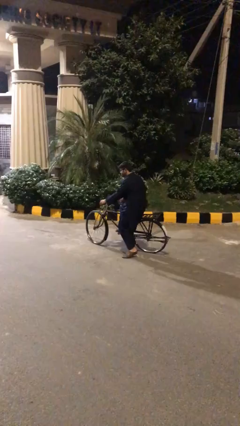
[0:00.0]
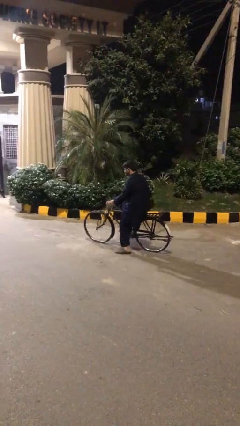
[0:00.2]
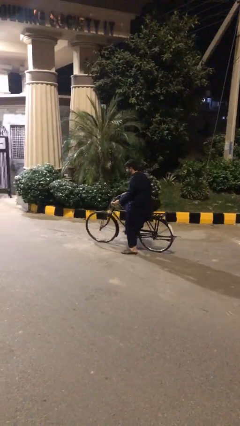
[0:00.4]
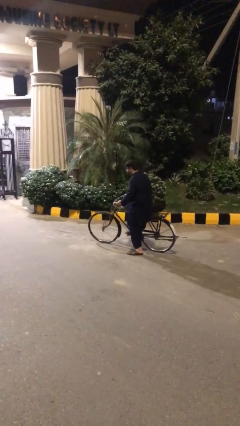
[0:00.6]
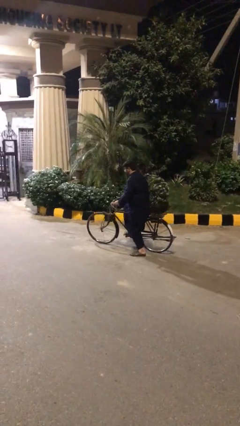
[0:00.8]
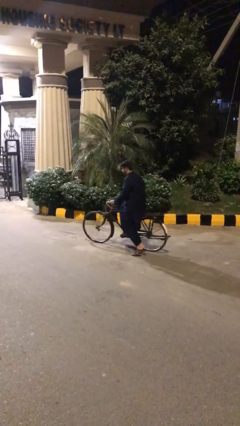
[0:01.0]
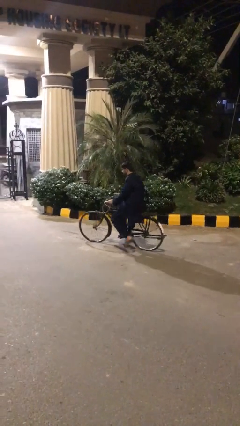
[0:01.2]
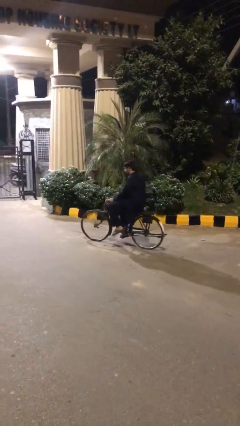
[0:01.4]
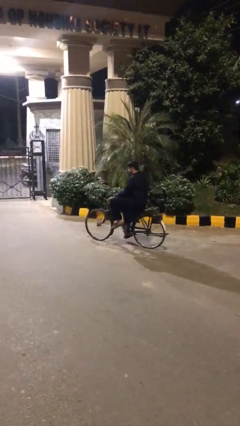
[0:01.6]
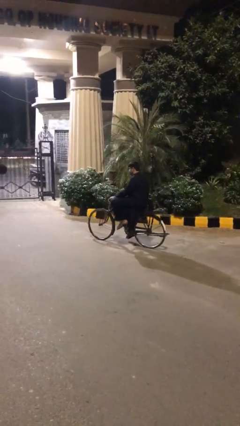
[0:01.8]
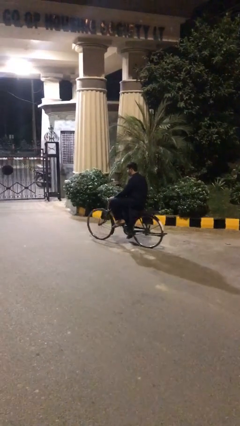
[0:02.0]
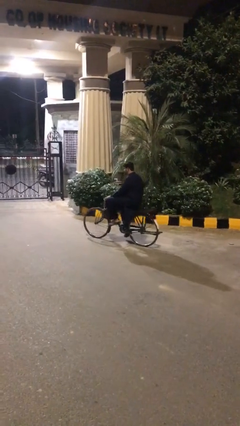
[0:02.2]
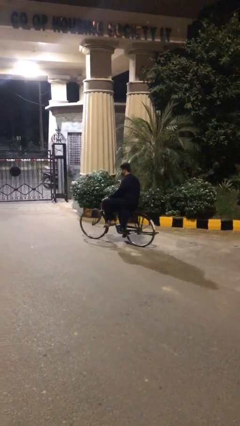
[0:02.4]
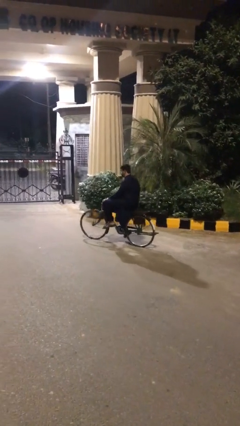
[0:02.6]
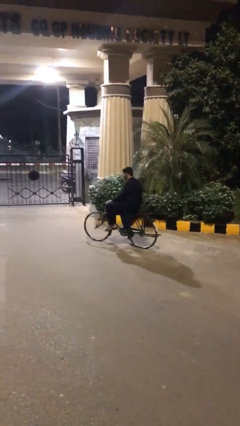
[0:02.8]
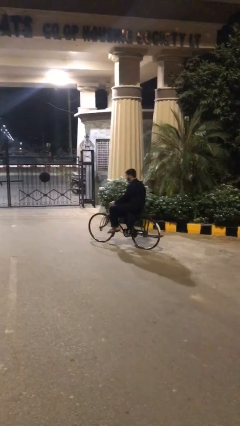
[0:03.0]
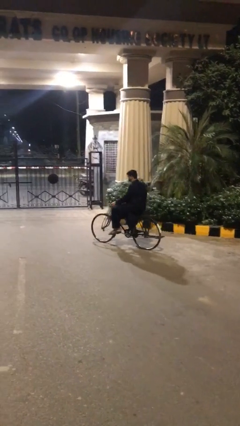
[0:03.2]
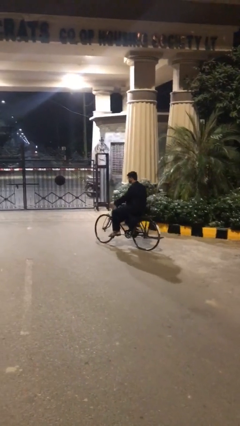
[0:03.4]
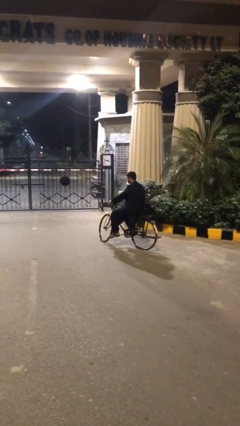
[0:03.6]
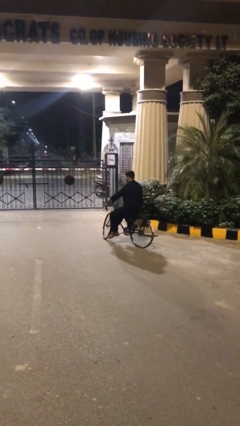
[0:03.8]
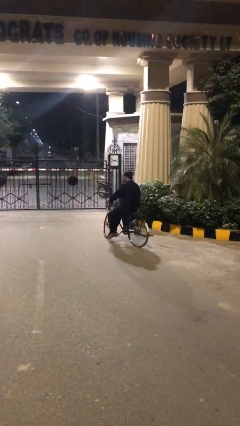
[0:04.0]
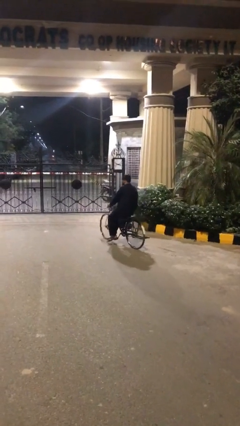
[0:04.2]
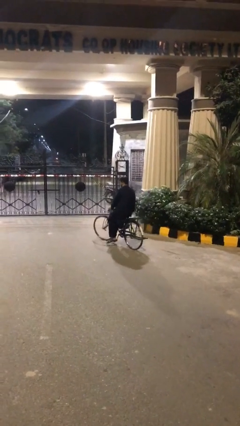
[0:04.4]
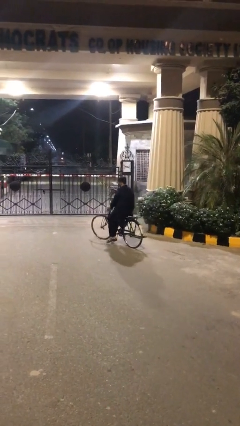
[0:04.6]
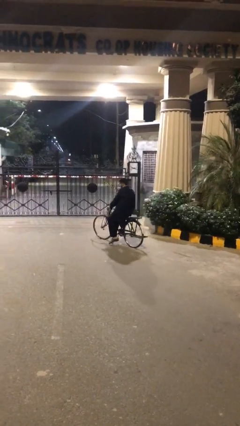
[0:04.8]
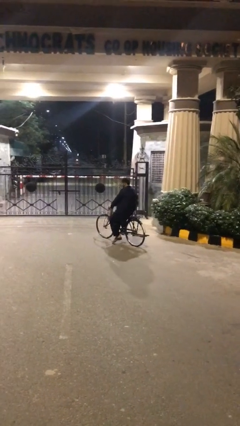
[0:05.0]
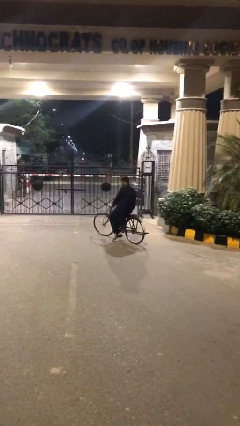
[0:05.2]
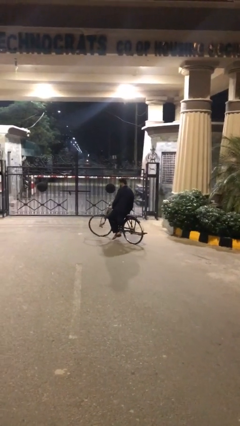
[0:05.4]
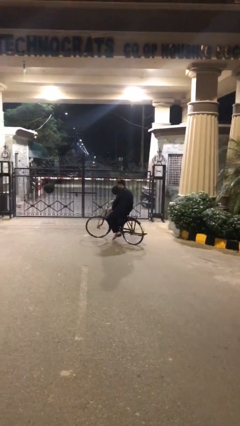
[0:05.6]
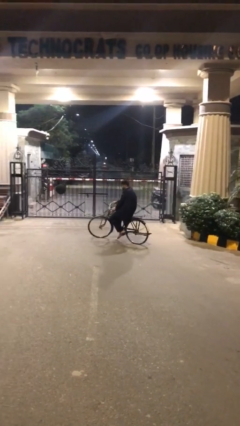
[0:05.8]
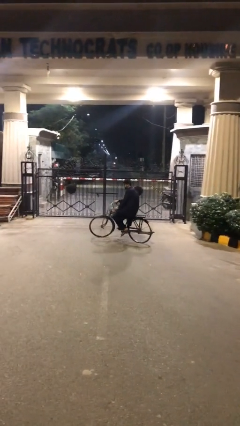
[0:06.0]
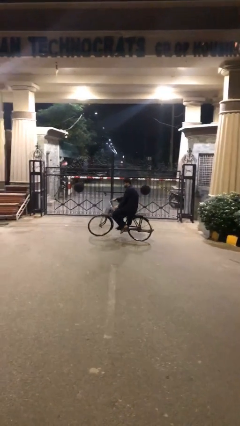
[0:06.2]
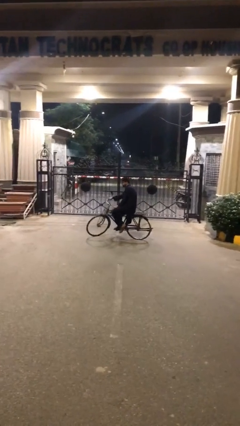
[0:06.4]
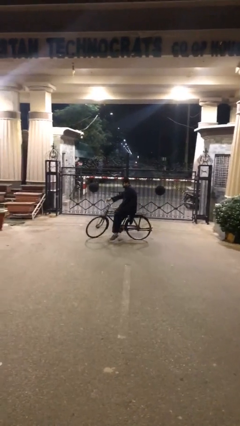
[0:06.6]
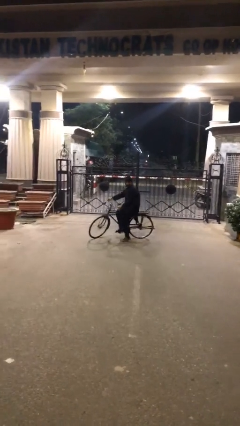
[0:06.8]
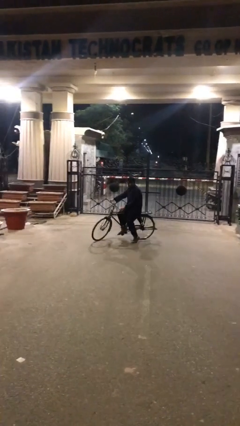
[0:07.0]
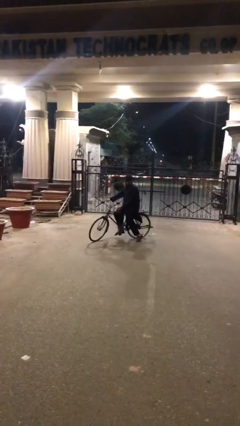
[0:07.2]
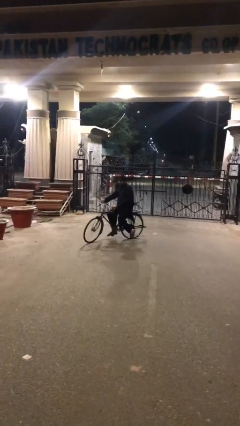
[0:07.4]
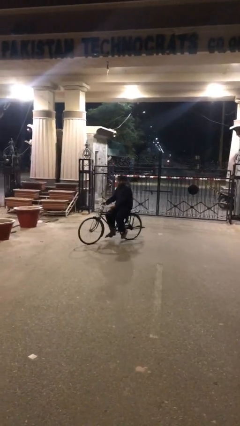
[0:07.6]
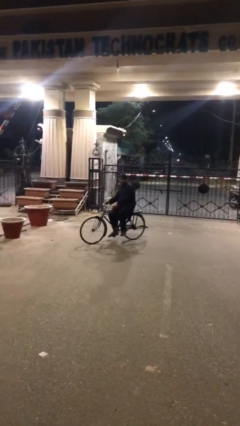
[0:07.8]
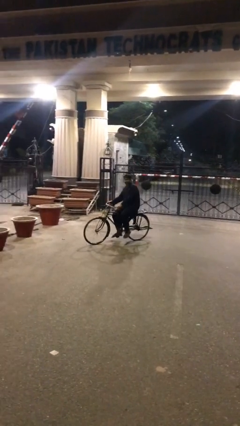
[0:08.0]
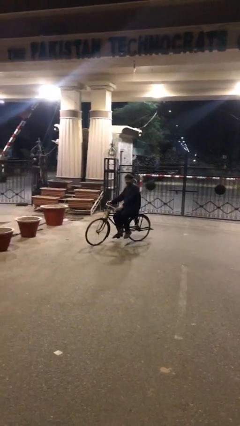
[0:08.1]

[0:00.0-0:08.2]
person rides bicycle

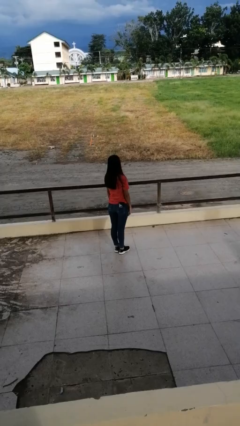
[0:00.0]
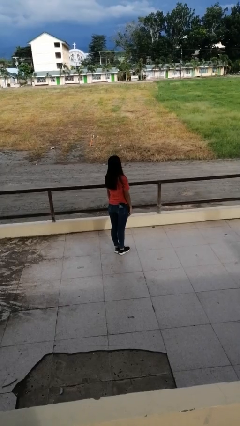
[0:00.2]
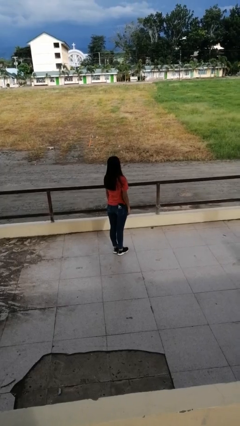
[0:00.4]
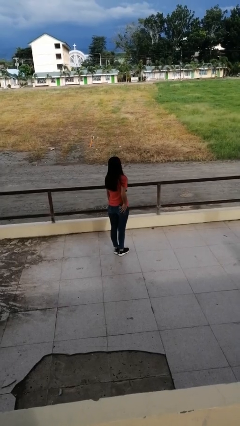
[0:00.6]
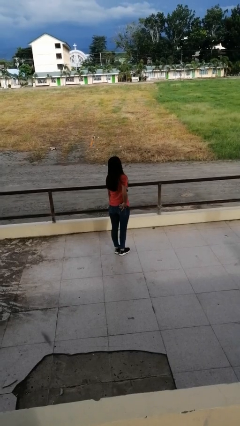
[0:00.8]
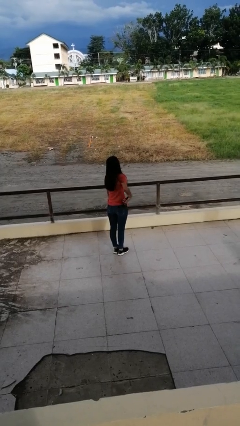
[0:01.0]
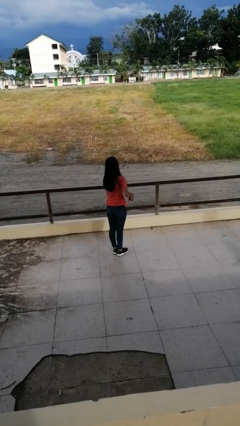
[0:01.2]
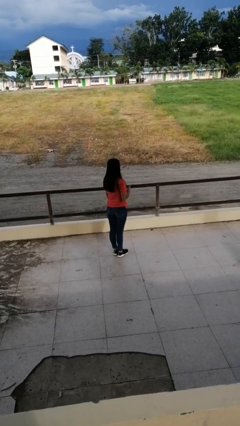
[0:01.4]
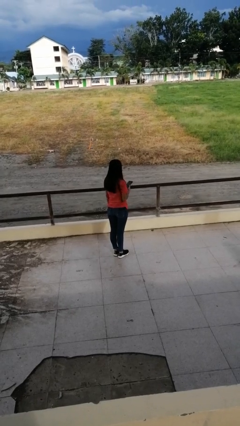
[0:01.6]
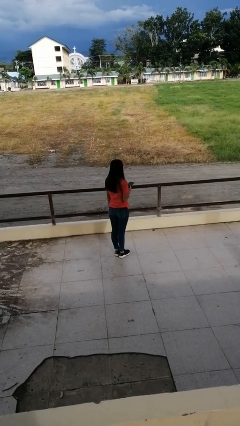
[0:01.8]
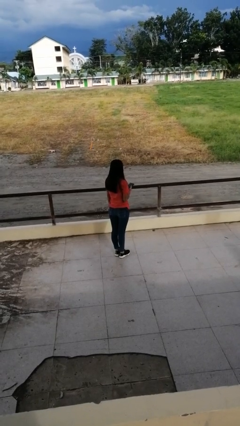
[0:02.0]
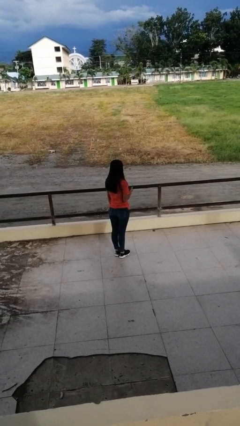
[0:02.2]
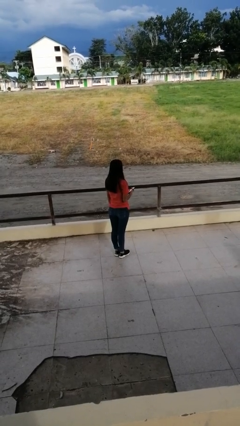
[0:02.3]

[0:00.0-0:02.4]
person takes phone from pocket

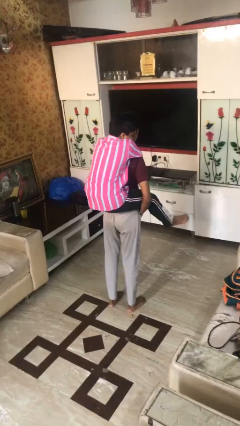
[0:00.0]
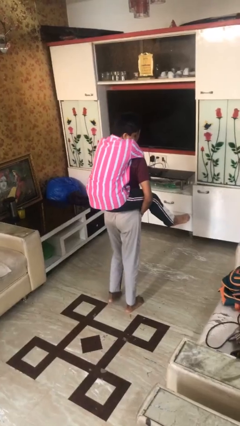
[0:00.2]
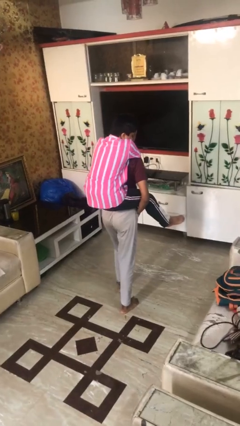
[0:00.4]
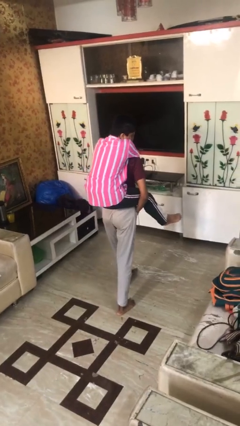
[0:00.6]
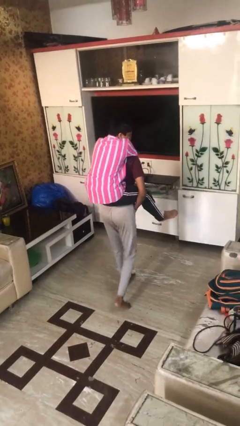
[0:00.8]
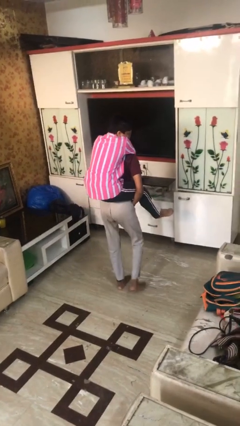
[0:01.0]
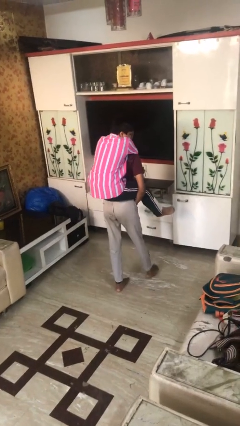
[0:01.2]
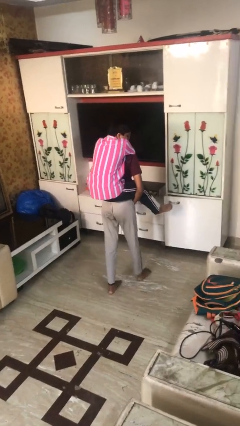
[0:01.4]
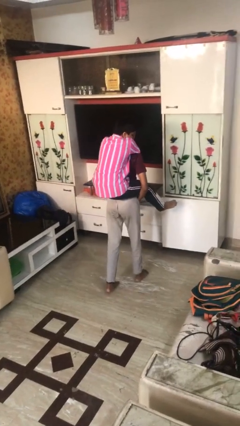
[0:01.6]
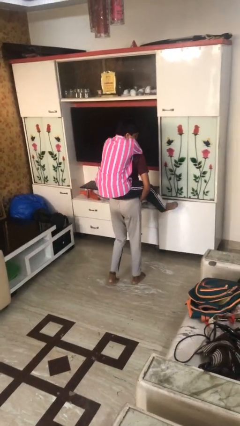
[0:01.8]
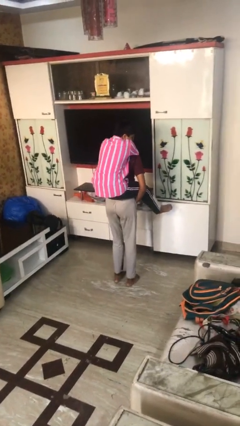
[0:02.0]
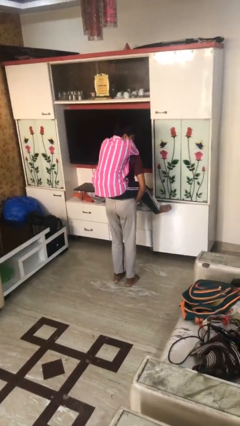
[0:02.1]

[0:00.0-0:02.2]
person carries person on back

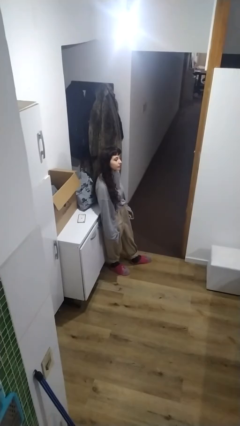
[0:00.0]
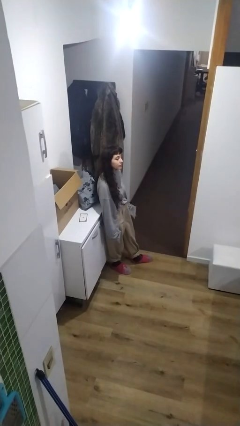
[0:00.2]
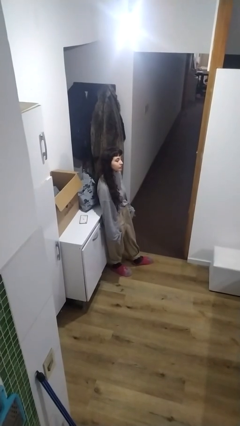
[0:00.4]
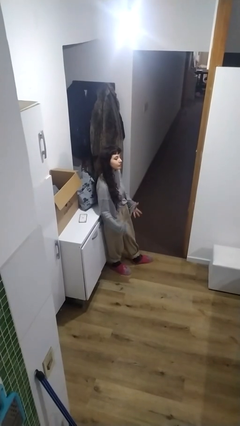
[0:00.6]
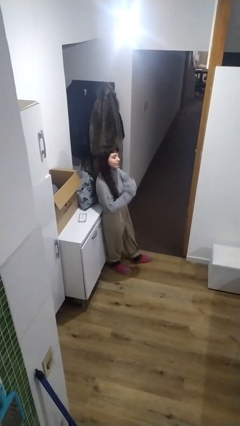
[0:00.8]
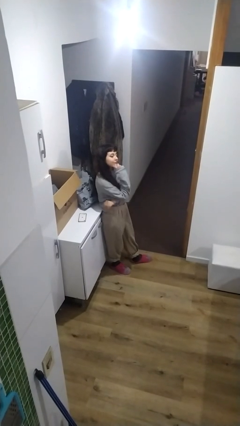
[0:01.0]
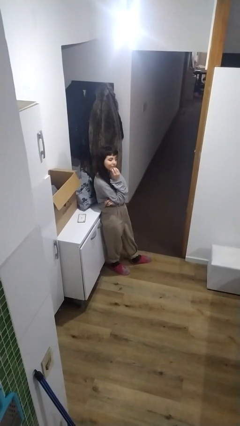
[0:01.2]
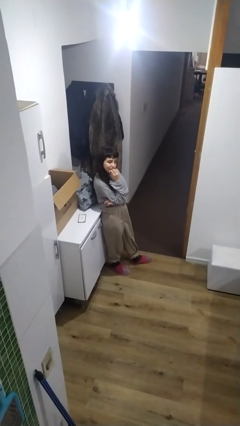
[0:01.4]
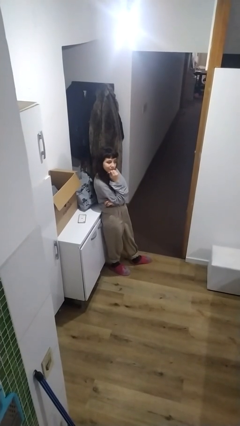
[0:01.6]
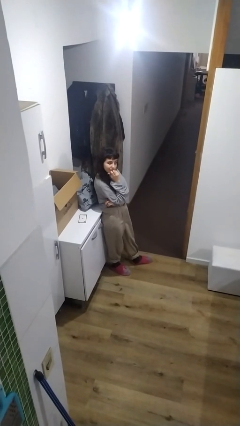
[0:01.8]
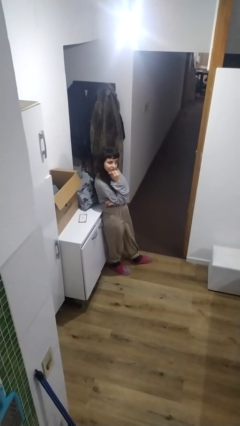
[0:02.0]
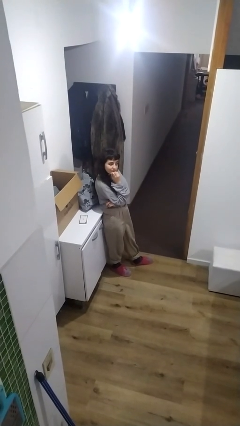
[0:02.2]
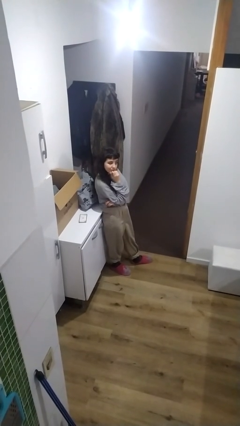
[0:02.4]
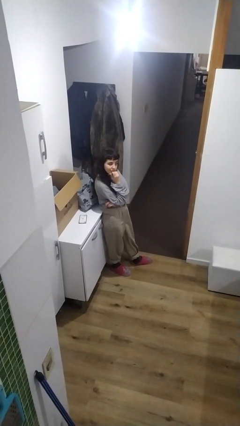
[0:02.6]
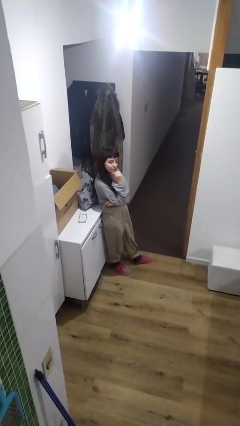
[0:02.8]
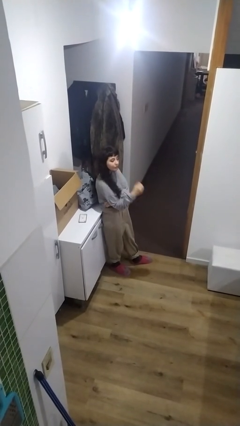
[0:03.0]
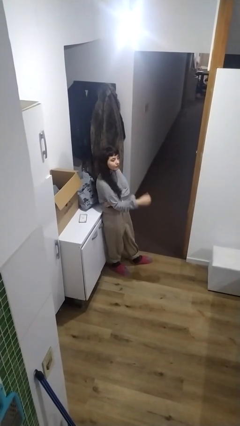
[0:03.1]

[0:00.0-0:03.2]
person strokes chin

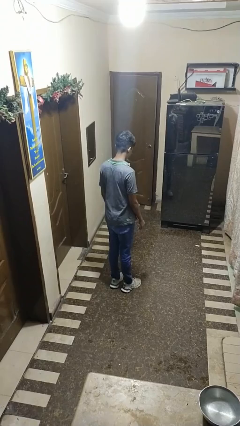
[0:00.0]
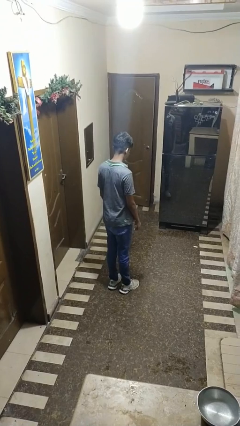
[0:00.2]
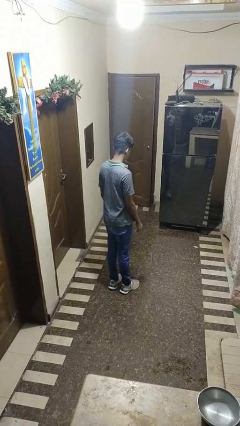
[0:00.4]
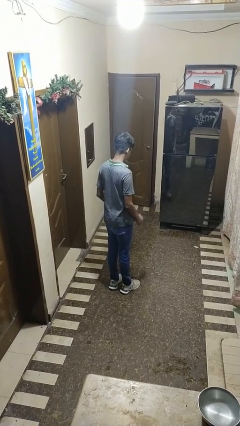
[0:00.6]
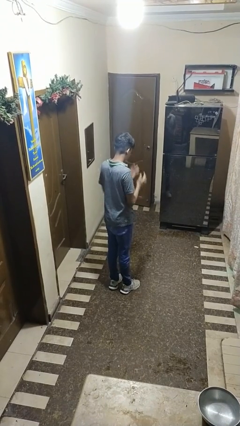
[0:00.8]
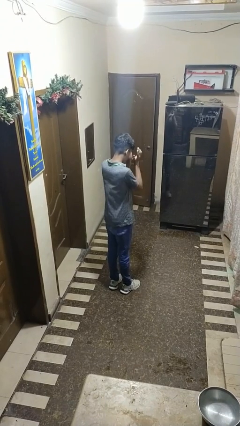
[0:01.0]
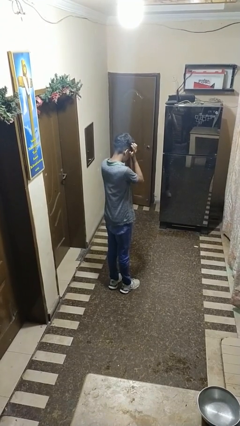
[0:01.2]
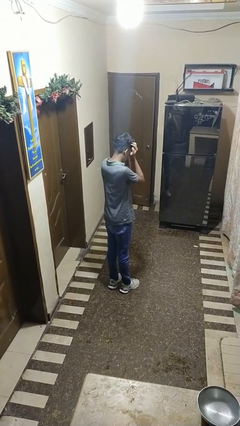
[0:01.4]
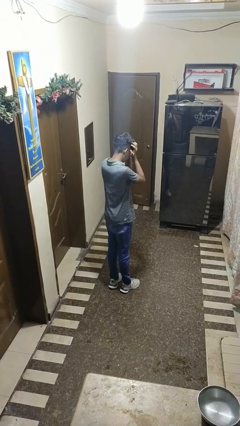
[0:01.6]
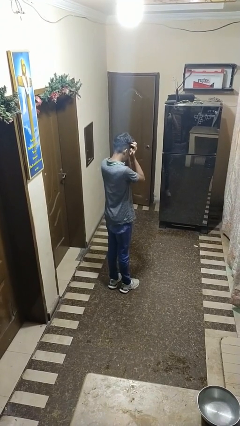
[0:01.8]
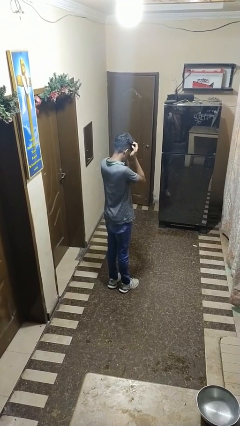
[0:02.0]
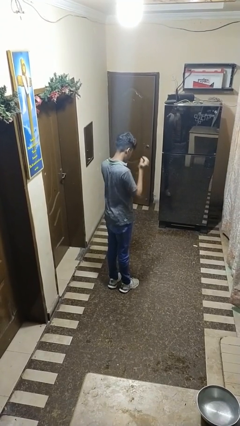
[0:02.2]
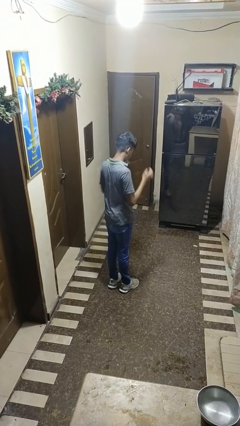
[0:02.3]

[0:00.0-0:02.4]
person rubs eyes
